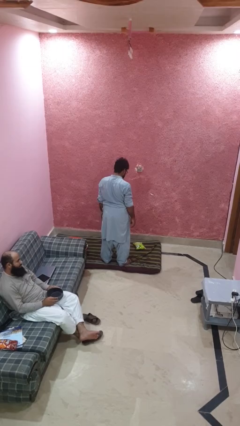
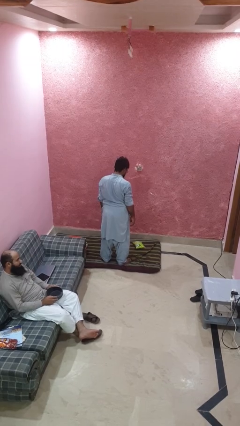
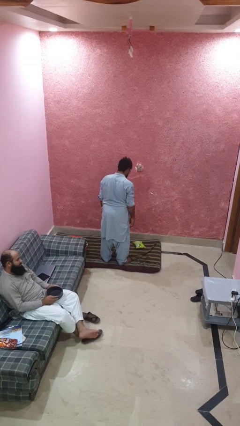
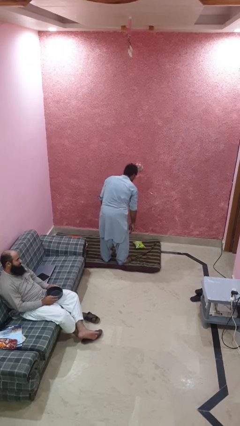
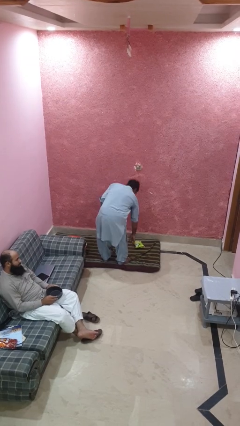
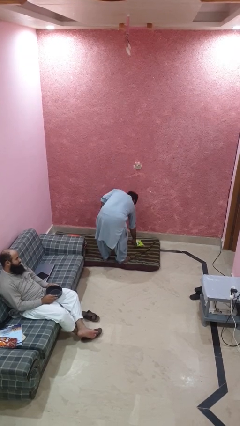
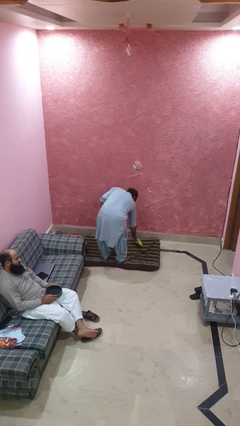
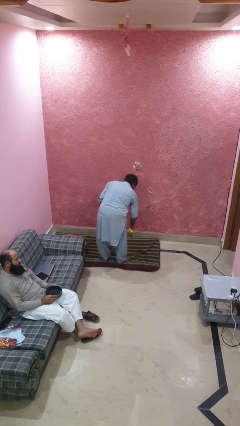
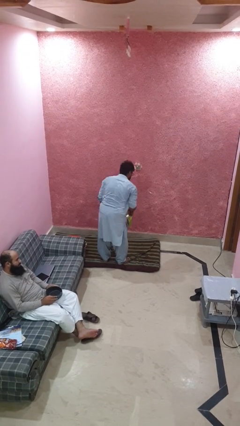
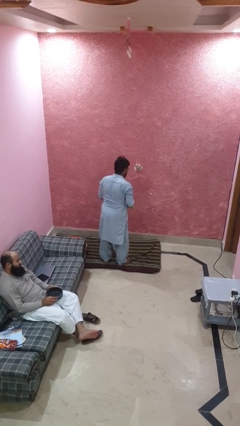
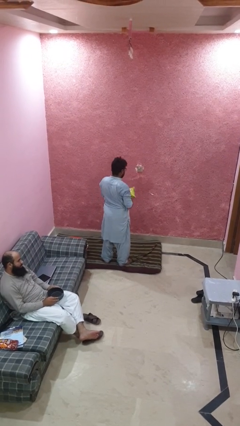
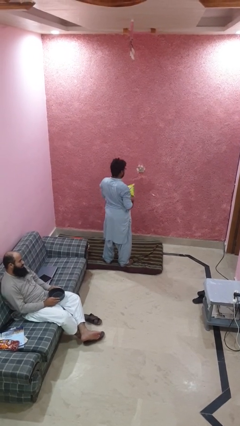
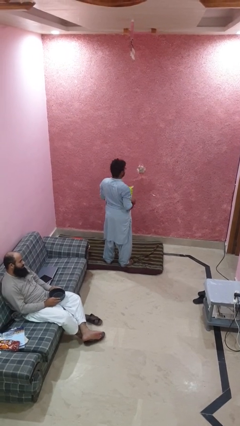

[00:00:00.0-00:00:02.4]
person picks up object from floor

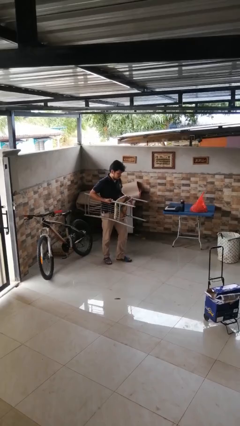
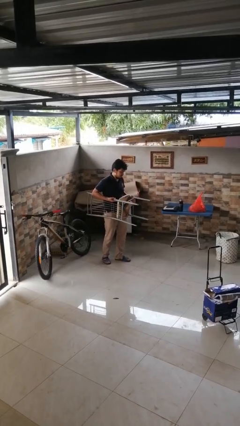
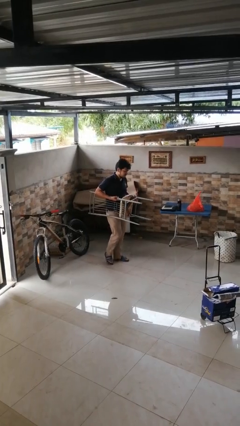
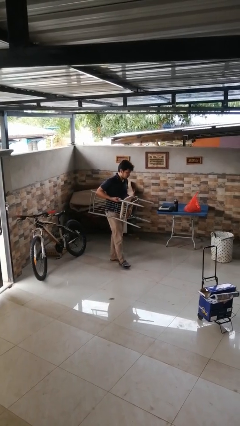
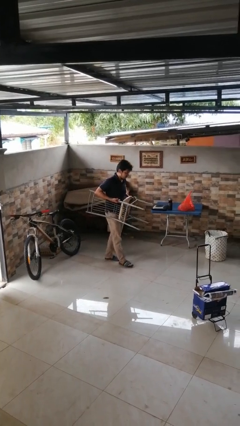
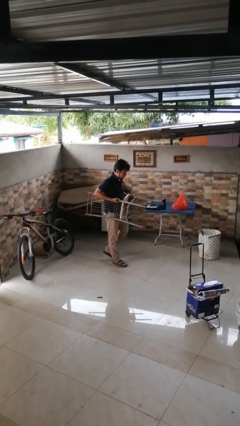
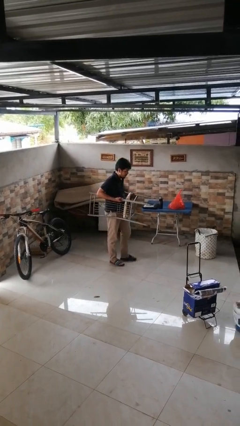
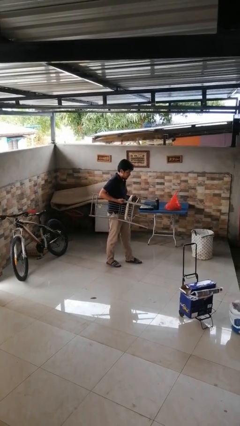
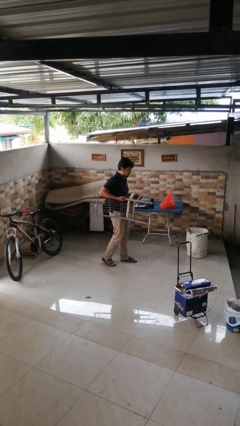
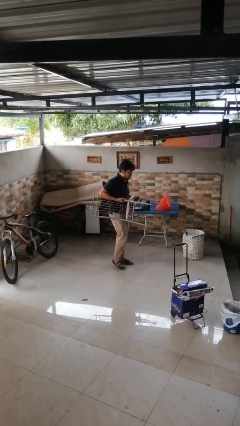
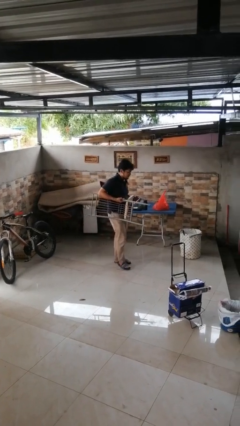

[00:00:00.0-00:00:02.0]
person carries furniture

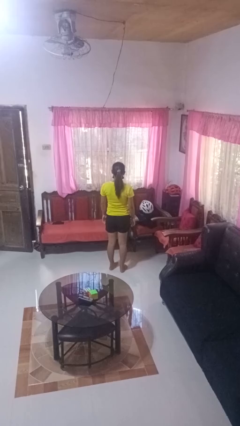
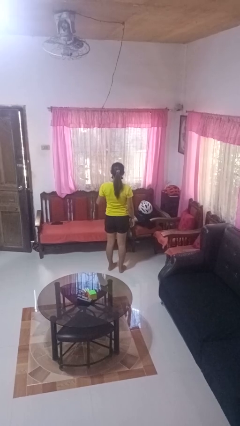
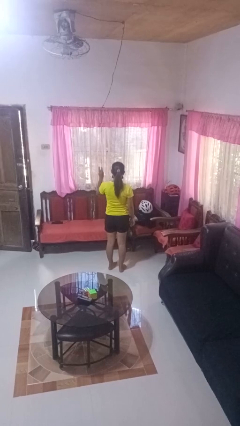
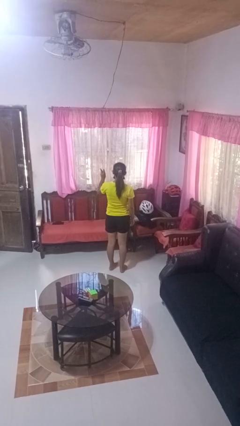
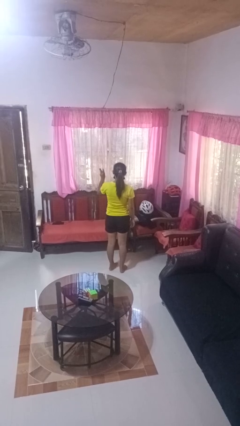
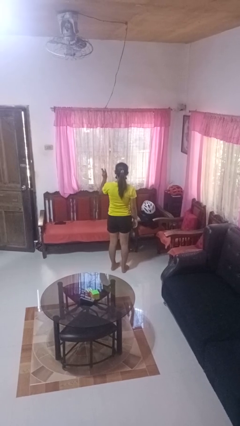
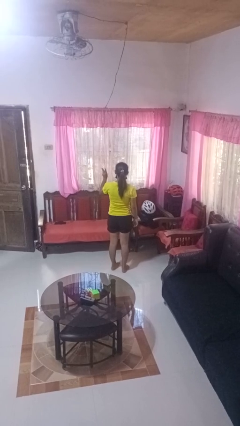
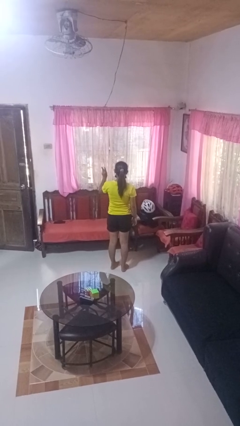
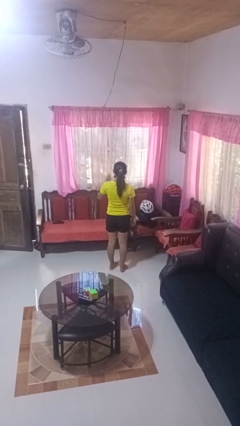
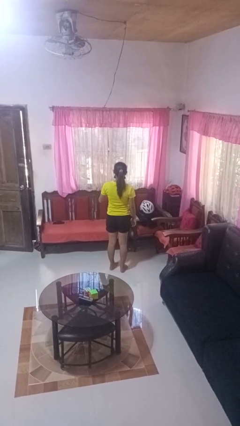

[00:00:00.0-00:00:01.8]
person gestures number three

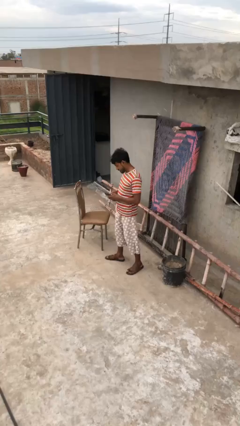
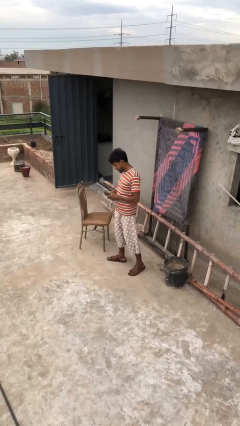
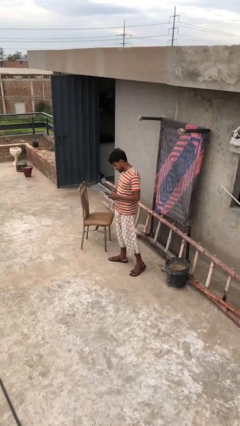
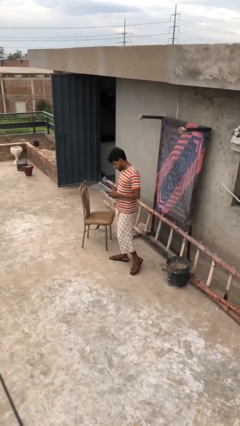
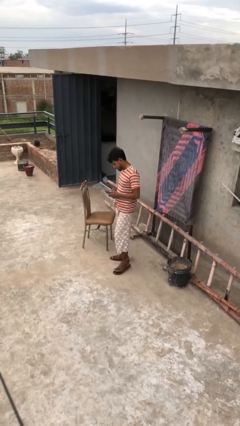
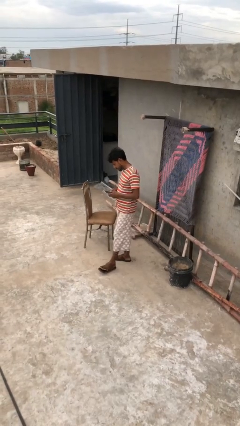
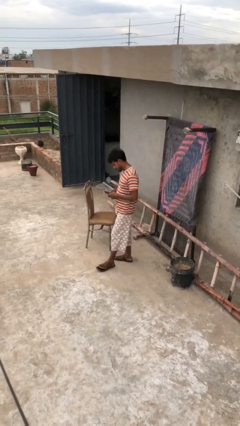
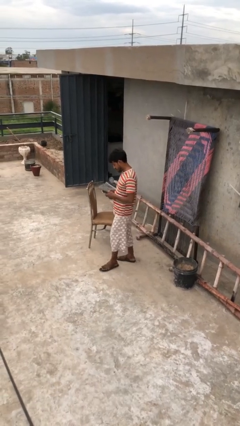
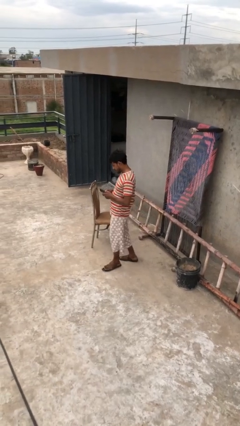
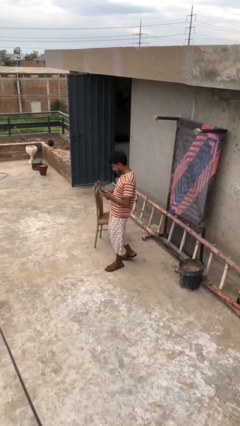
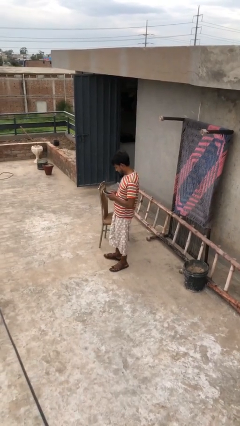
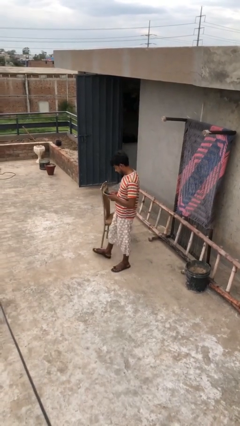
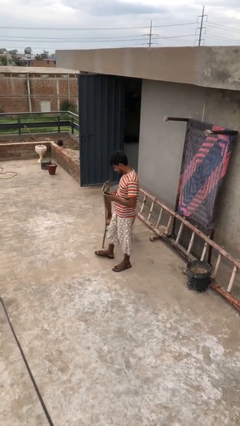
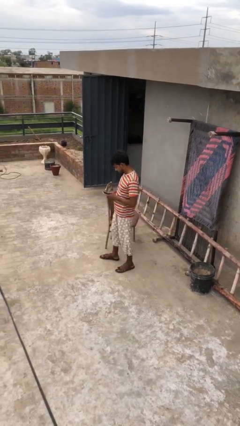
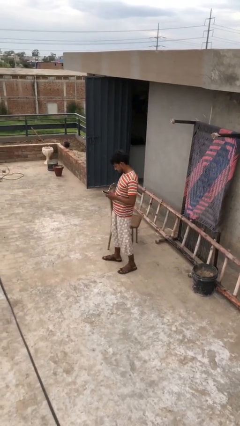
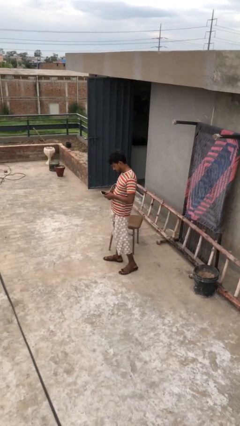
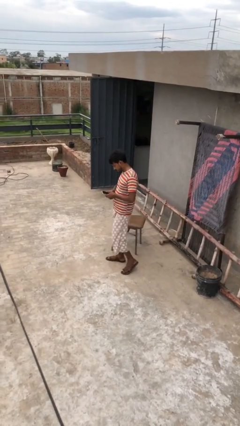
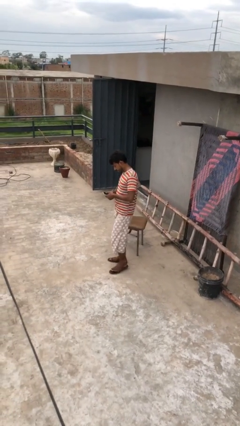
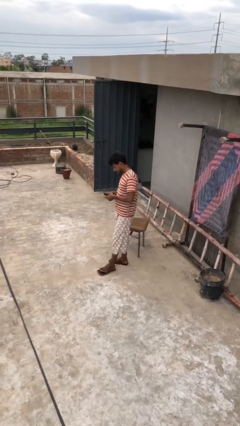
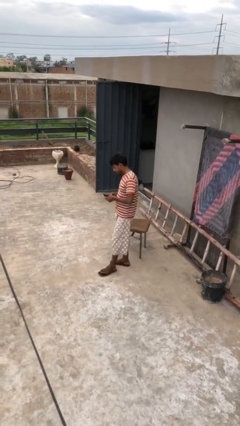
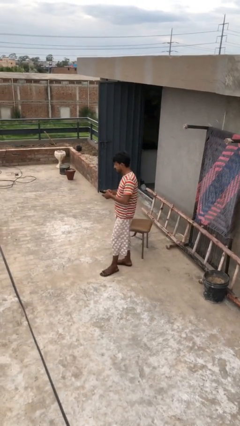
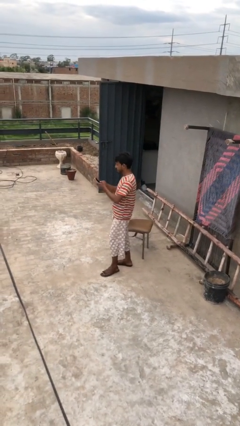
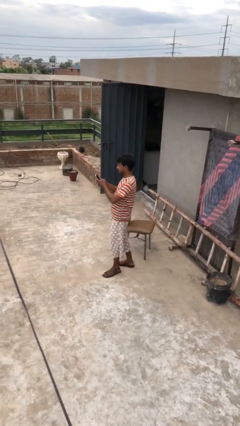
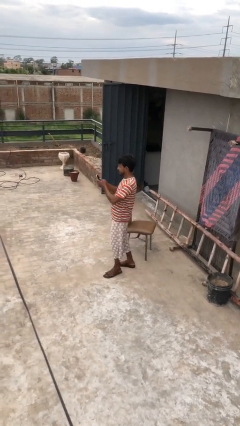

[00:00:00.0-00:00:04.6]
person texts on phone

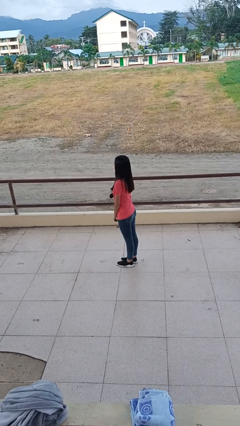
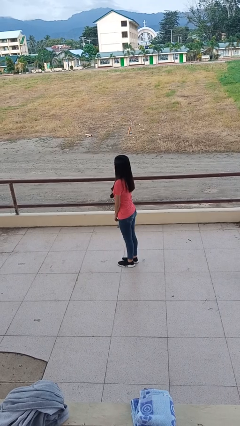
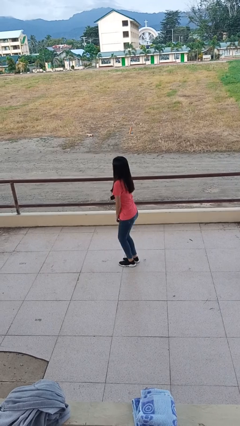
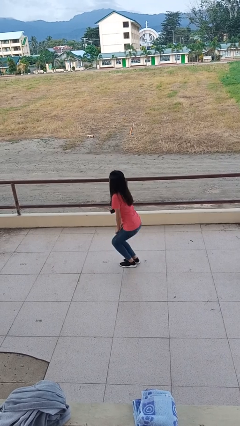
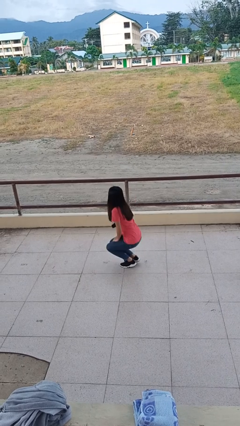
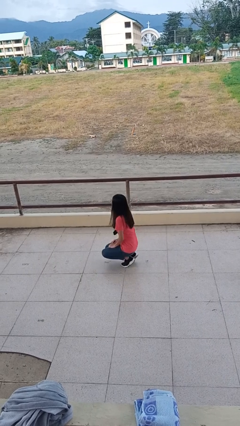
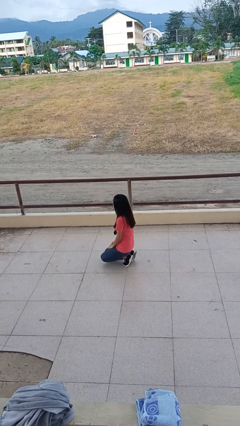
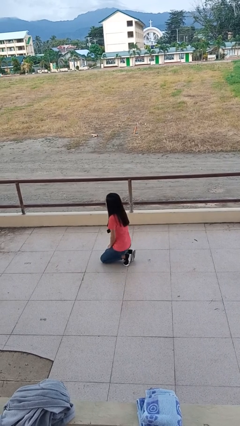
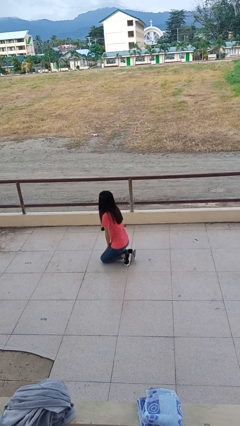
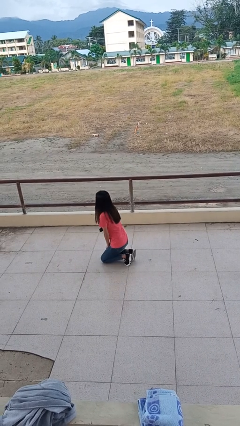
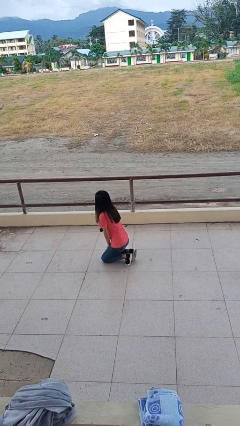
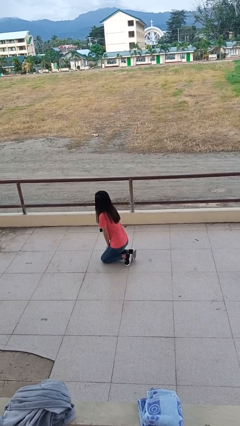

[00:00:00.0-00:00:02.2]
person kneels

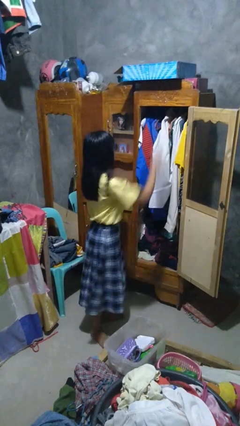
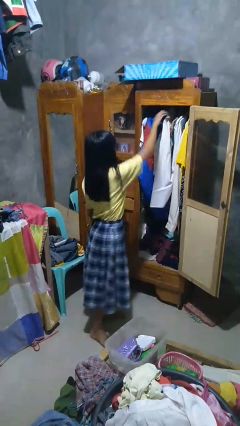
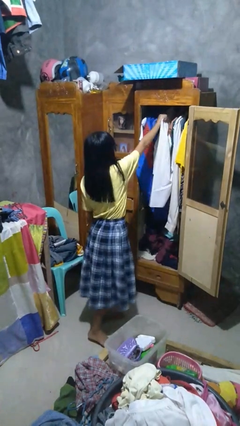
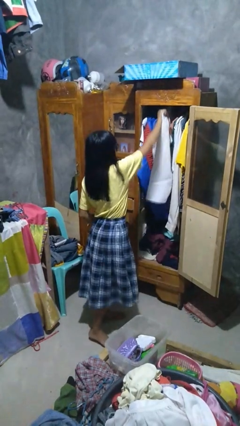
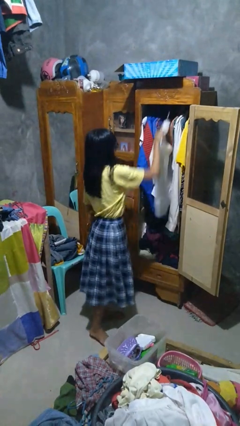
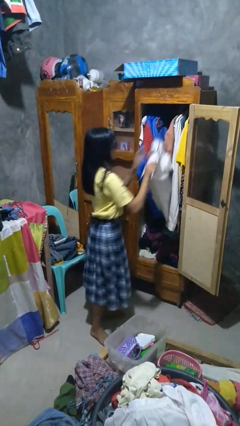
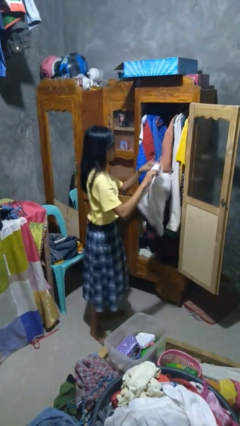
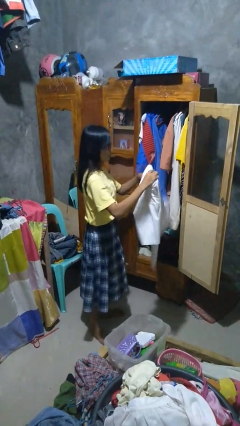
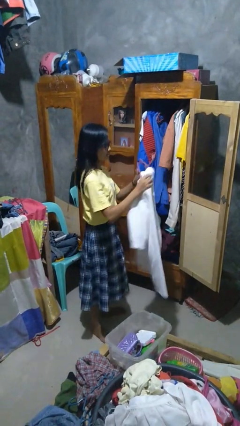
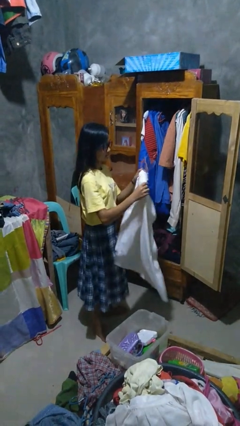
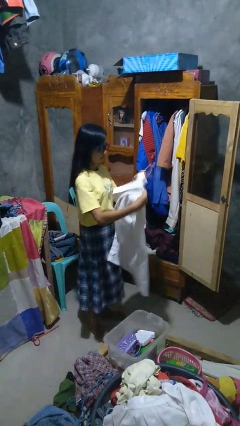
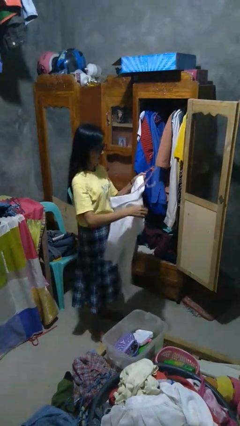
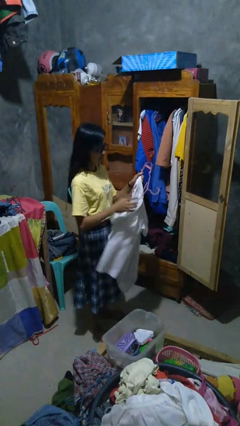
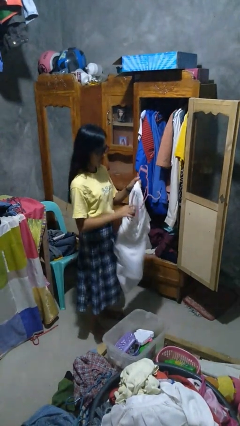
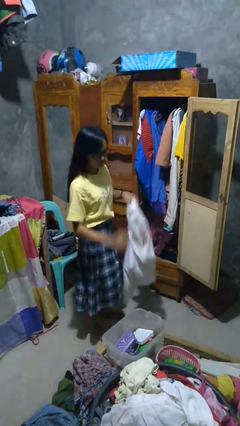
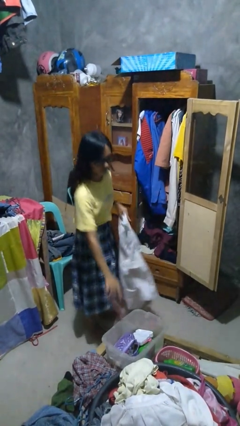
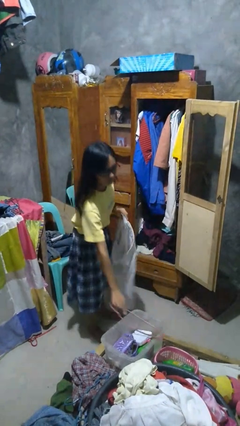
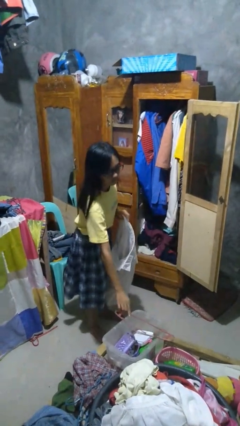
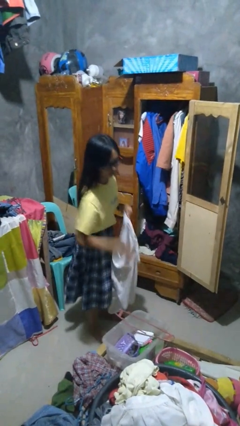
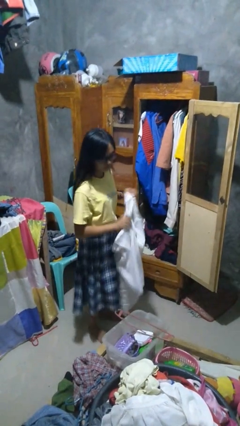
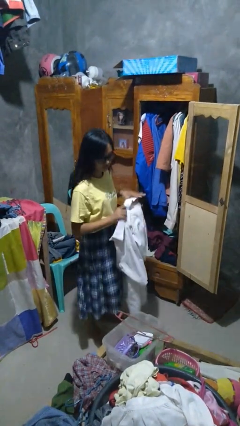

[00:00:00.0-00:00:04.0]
person takes clothes from closet

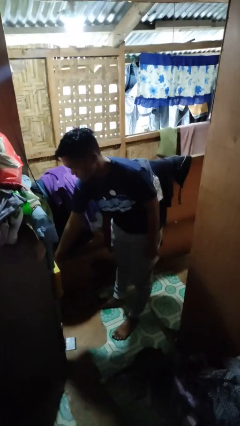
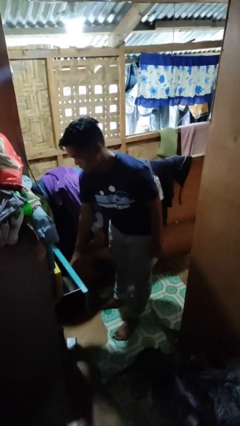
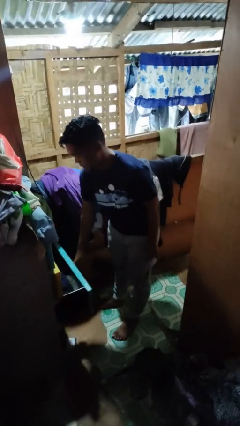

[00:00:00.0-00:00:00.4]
person opens dresser drawer
